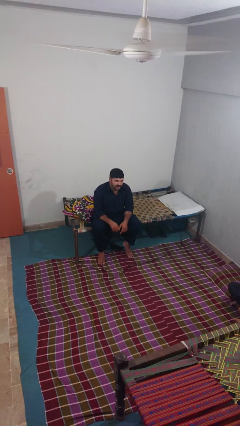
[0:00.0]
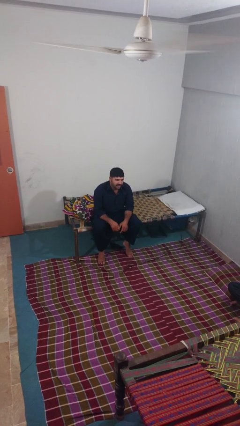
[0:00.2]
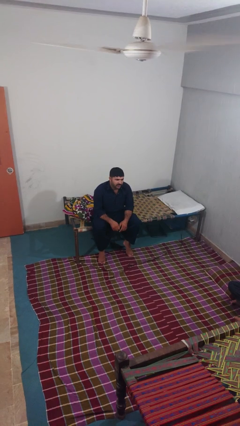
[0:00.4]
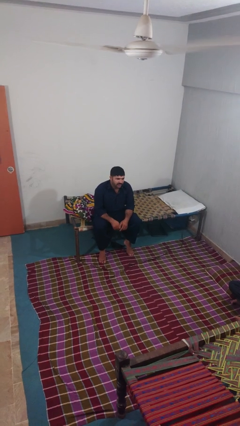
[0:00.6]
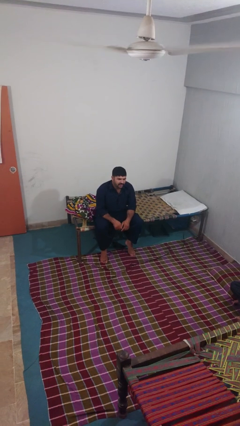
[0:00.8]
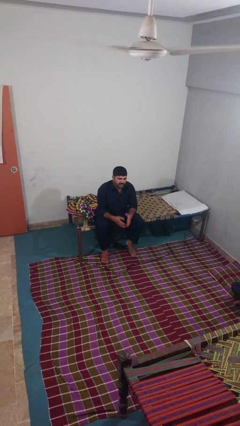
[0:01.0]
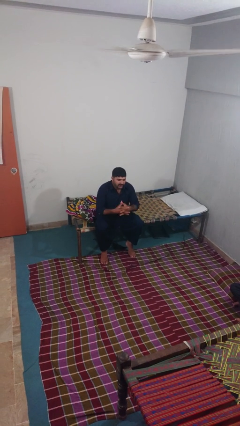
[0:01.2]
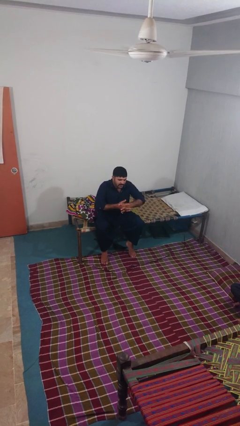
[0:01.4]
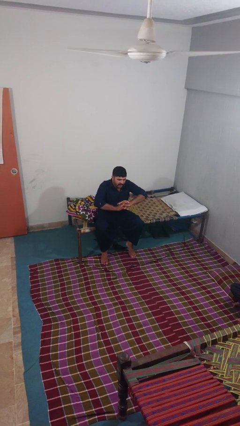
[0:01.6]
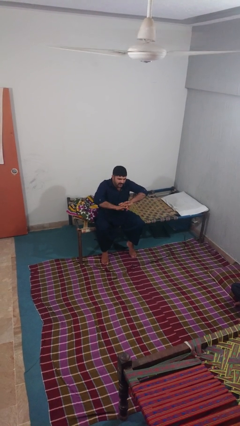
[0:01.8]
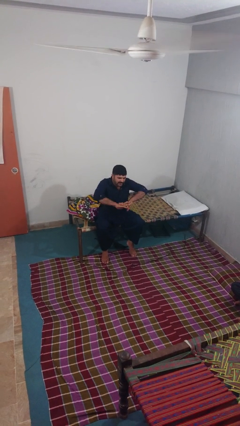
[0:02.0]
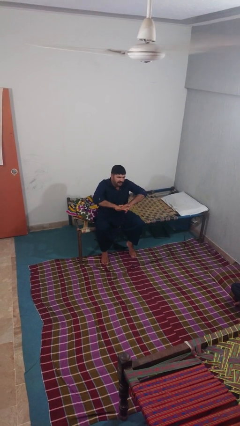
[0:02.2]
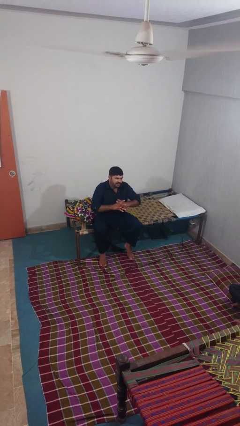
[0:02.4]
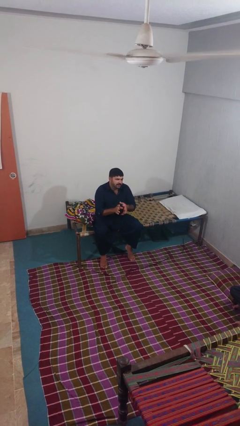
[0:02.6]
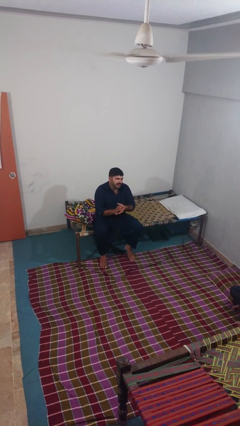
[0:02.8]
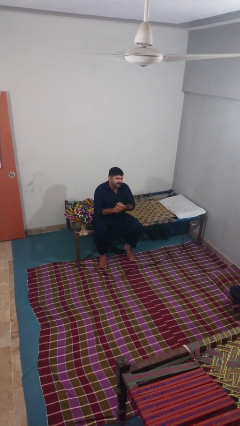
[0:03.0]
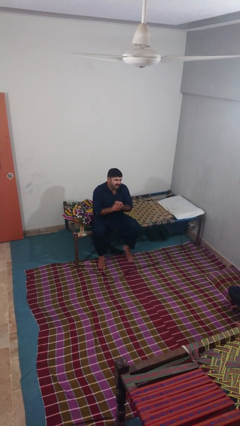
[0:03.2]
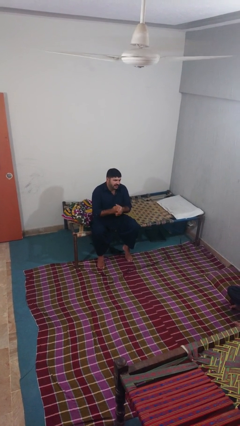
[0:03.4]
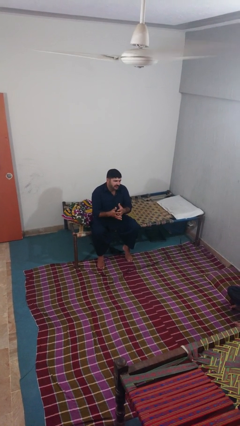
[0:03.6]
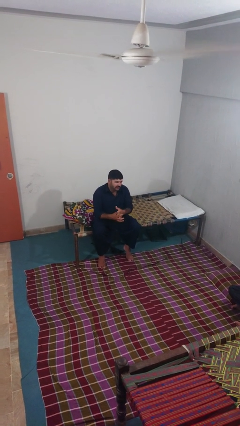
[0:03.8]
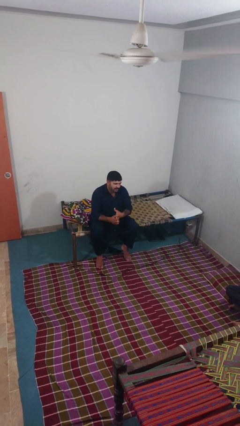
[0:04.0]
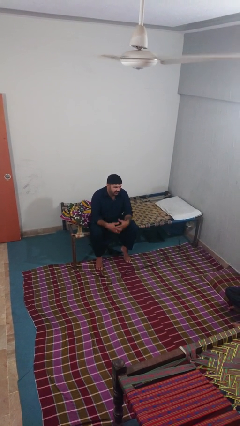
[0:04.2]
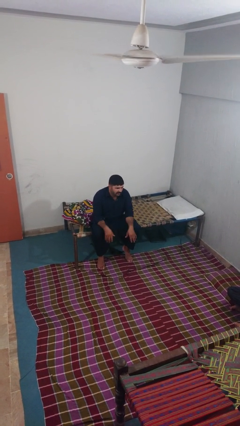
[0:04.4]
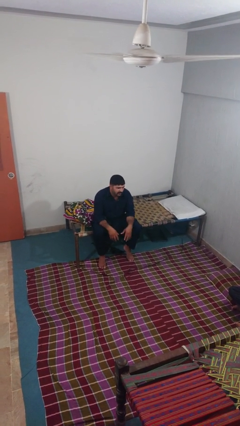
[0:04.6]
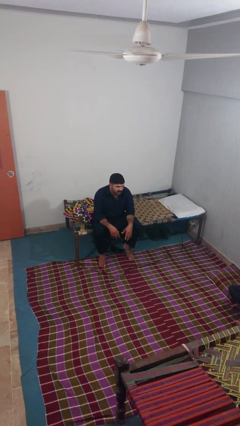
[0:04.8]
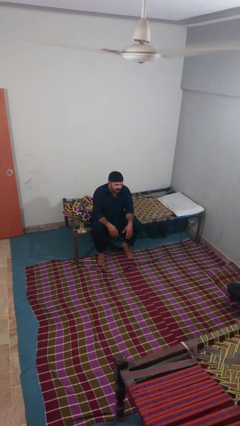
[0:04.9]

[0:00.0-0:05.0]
person cracks knuckles

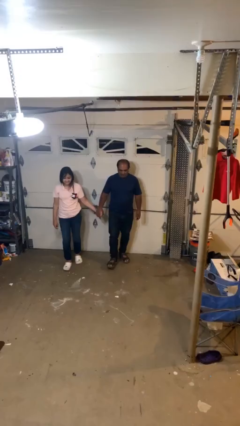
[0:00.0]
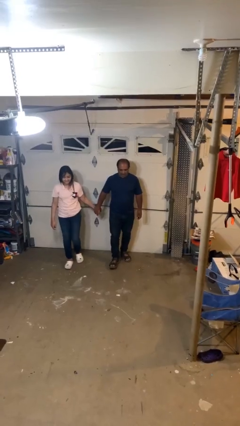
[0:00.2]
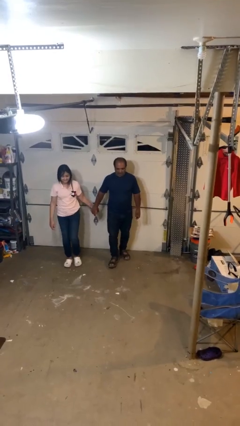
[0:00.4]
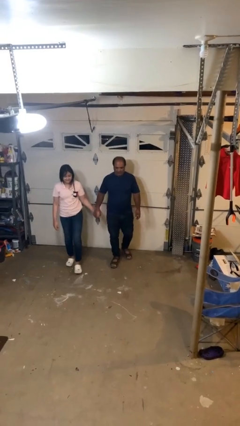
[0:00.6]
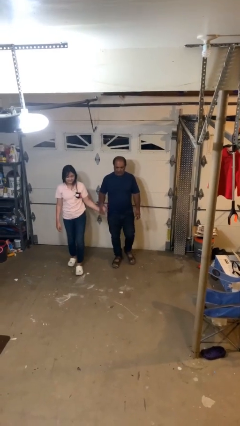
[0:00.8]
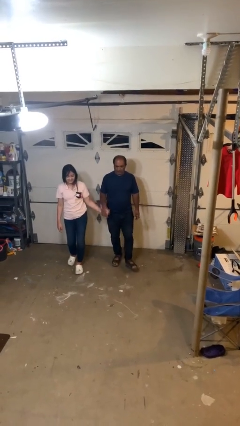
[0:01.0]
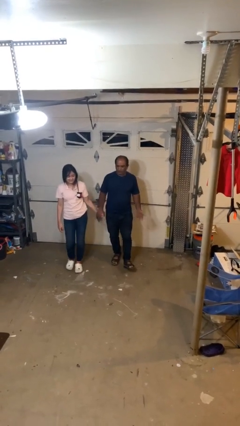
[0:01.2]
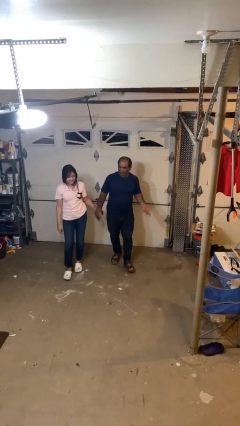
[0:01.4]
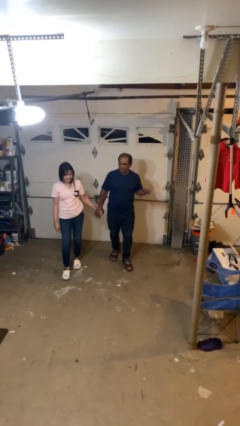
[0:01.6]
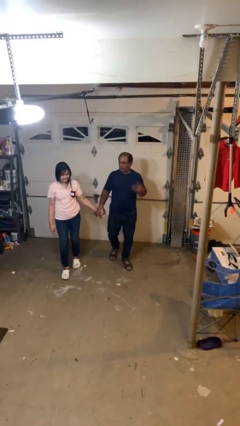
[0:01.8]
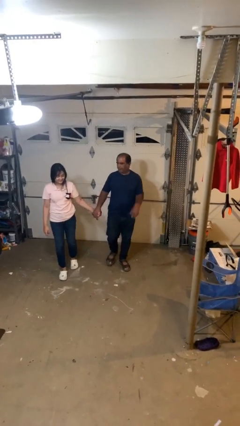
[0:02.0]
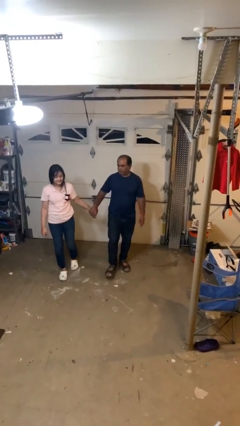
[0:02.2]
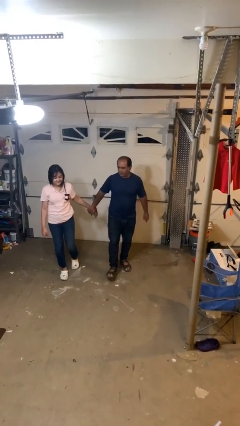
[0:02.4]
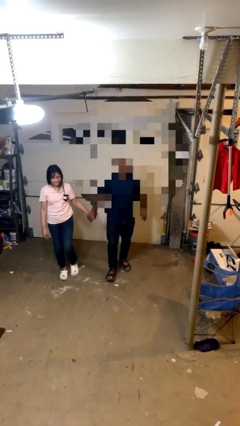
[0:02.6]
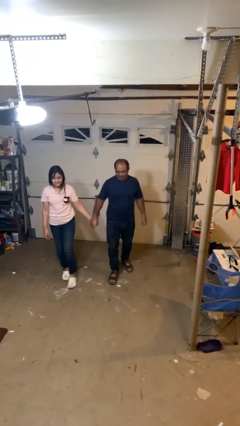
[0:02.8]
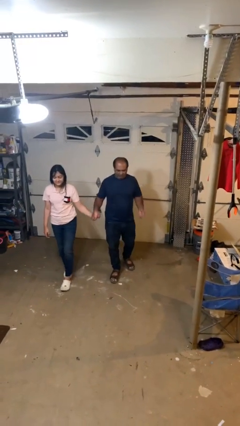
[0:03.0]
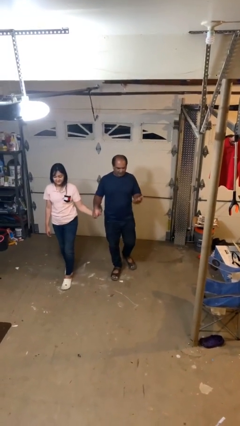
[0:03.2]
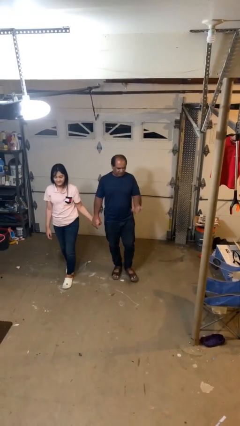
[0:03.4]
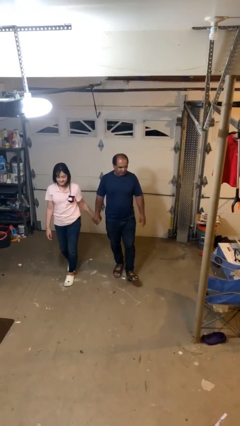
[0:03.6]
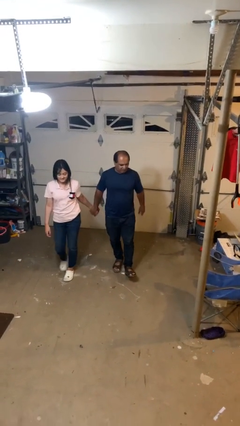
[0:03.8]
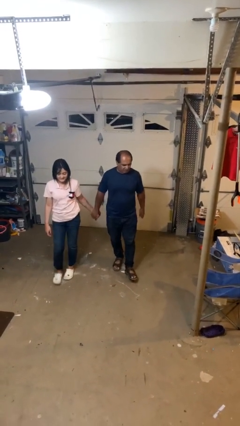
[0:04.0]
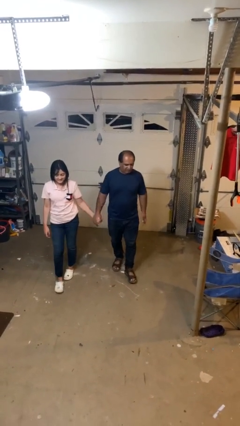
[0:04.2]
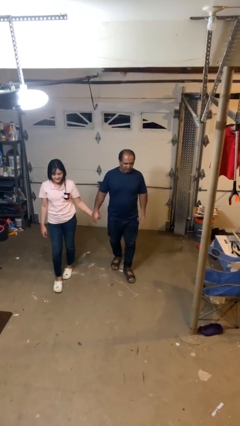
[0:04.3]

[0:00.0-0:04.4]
person holds hand

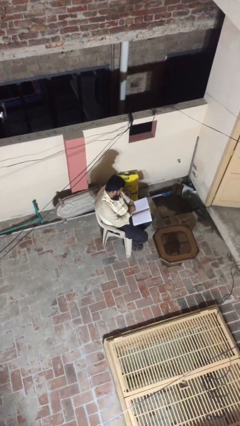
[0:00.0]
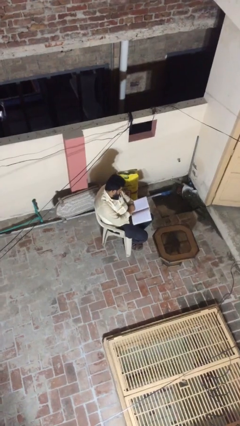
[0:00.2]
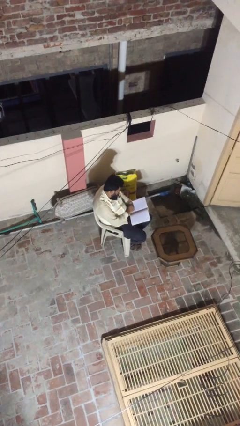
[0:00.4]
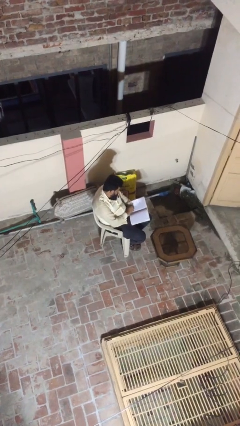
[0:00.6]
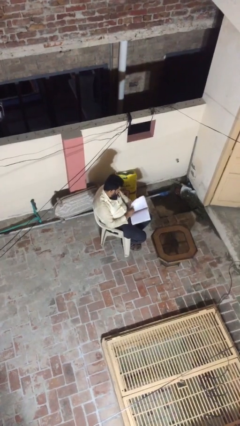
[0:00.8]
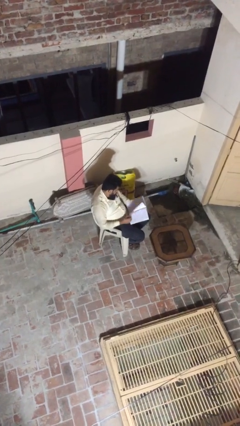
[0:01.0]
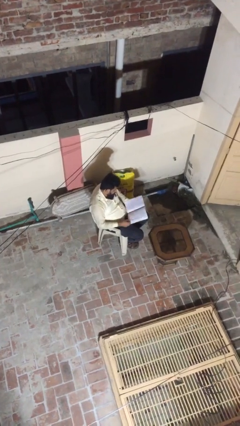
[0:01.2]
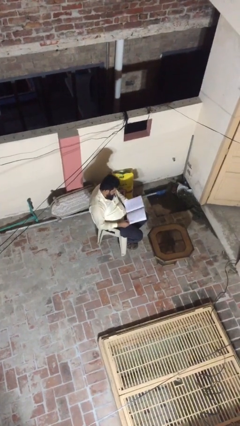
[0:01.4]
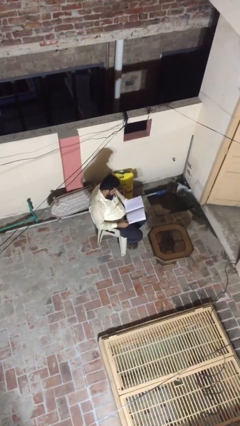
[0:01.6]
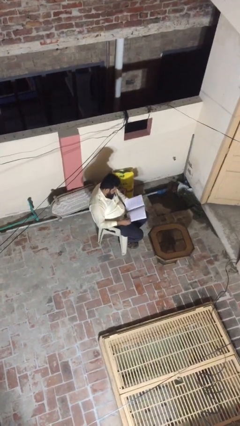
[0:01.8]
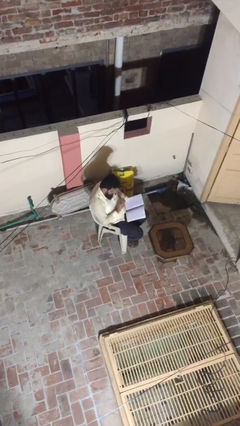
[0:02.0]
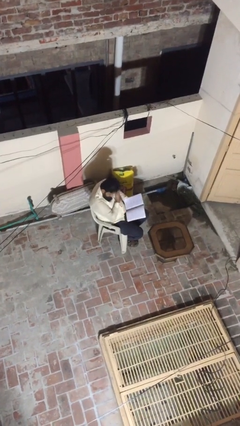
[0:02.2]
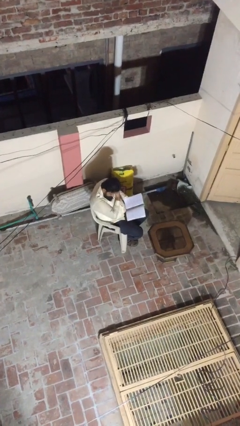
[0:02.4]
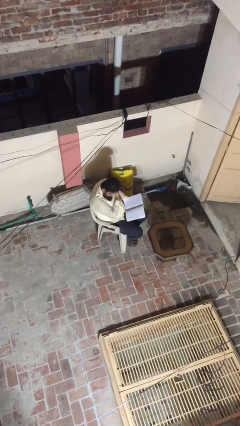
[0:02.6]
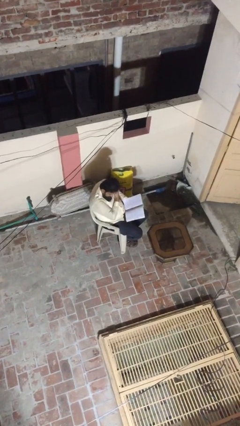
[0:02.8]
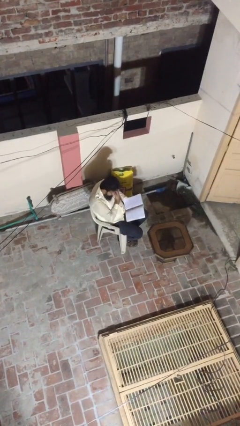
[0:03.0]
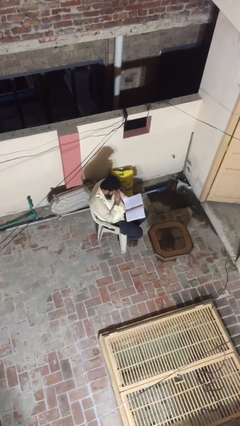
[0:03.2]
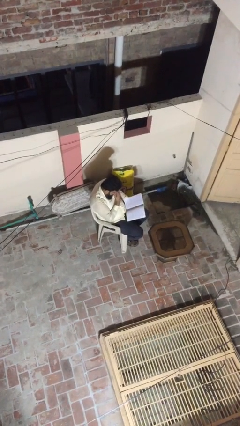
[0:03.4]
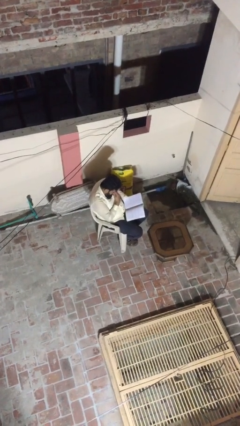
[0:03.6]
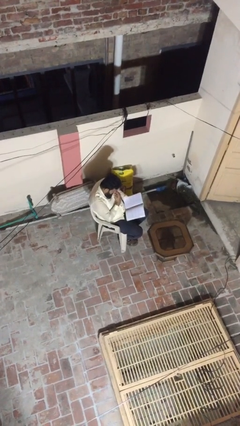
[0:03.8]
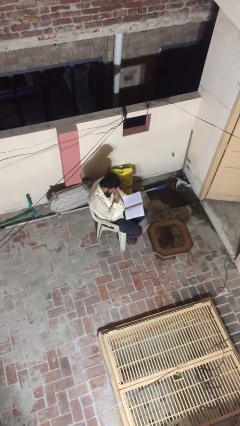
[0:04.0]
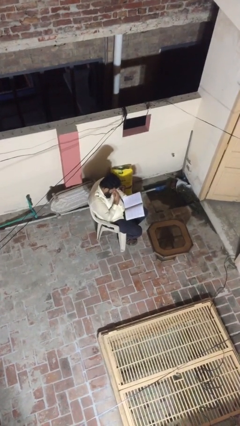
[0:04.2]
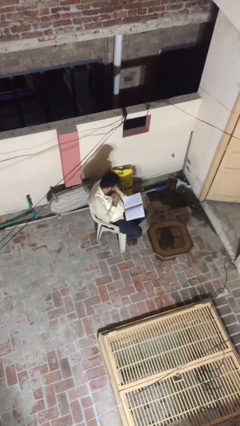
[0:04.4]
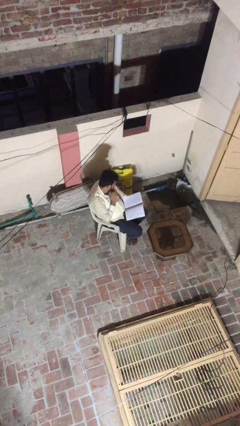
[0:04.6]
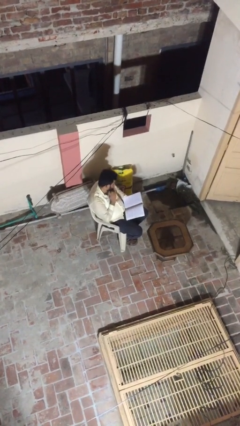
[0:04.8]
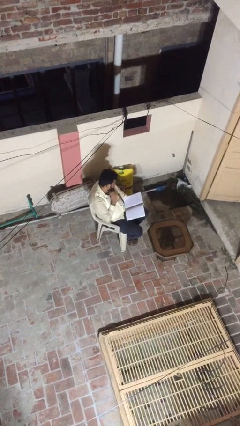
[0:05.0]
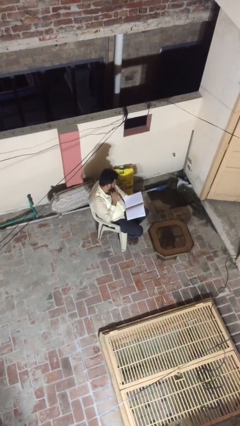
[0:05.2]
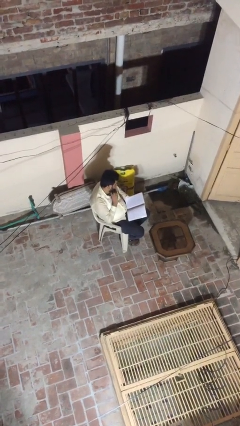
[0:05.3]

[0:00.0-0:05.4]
person reads document

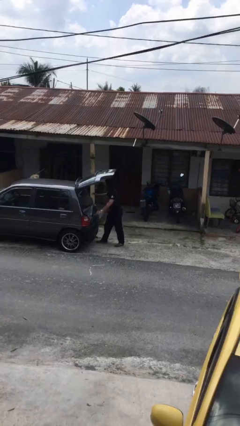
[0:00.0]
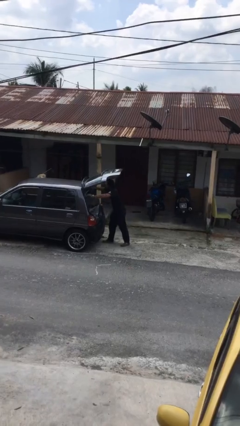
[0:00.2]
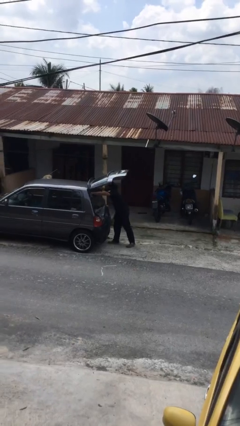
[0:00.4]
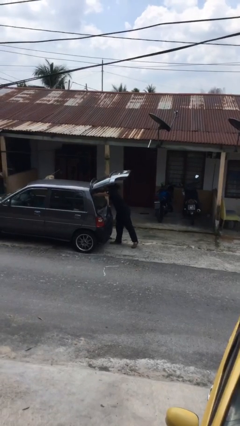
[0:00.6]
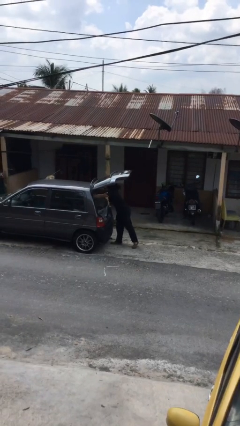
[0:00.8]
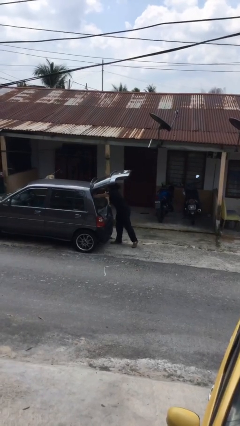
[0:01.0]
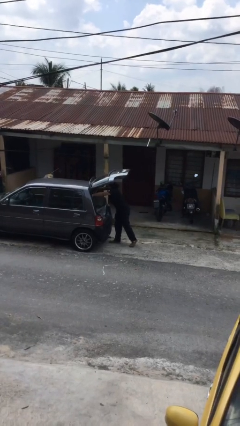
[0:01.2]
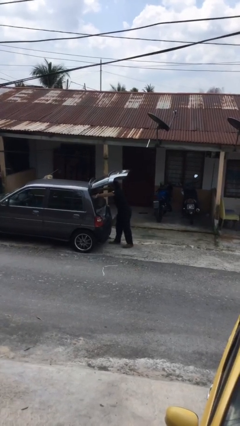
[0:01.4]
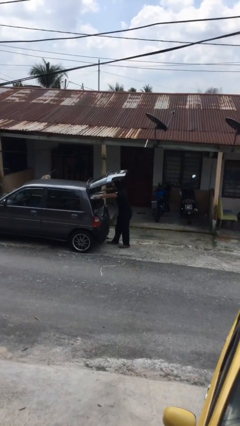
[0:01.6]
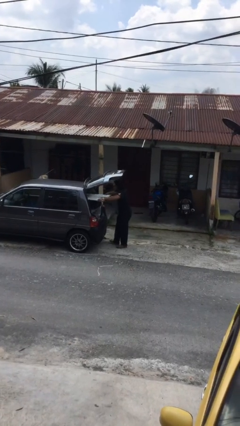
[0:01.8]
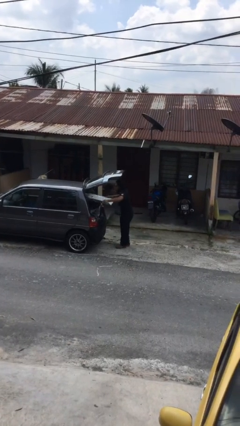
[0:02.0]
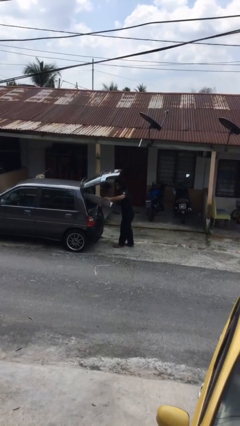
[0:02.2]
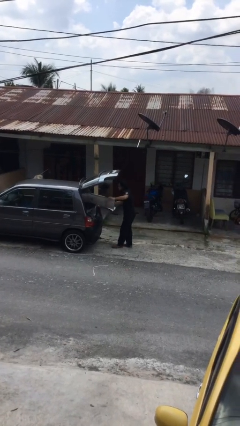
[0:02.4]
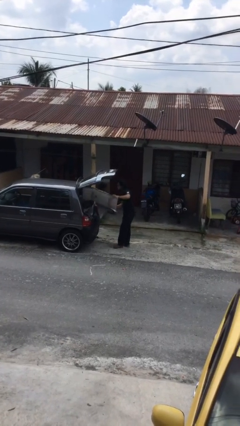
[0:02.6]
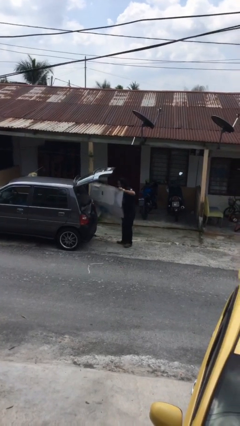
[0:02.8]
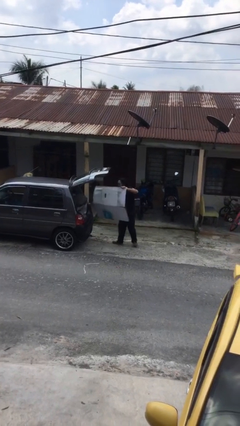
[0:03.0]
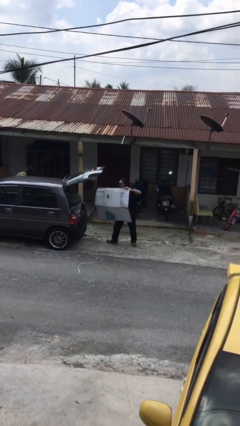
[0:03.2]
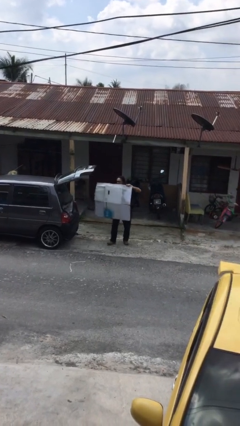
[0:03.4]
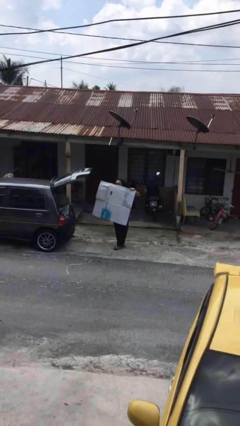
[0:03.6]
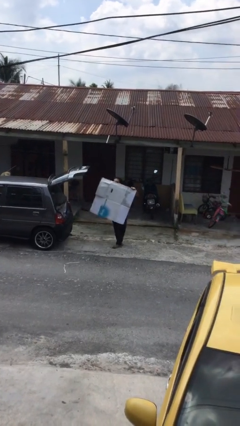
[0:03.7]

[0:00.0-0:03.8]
person unloads car
